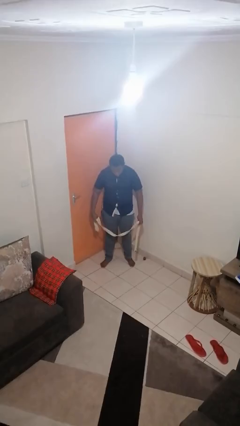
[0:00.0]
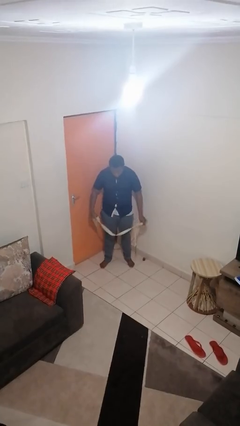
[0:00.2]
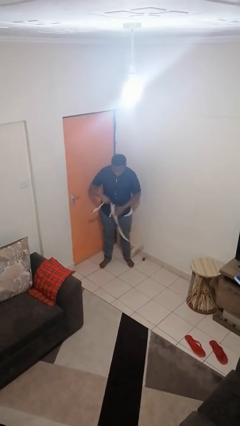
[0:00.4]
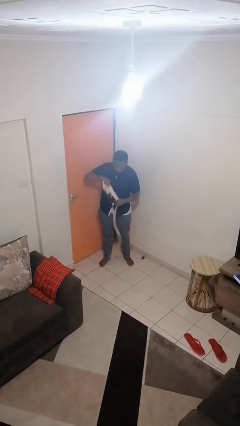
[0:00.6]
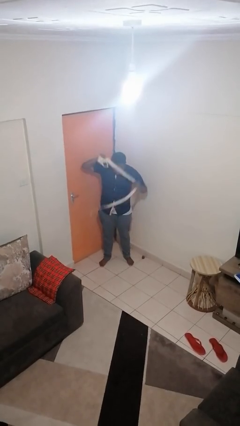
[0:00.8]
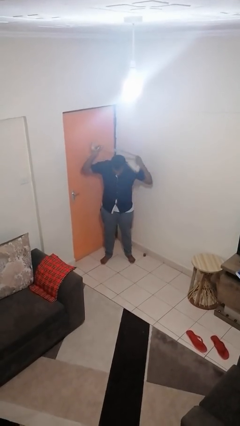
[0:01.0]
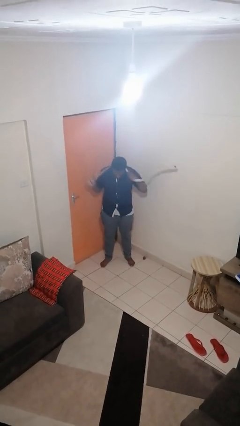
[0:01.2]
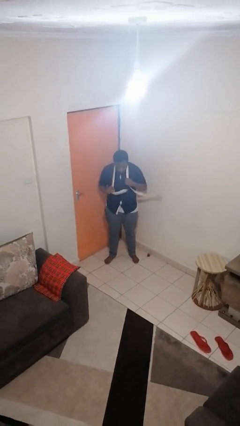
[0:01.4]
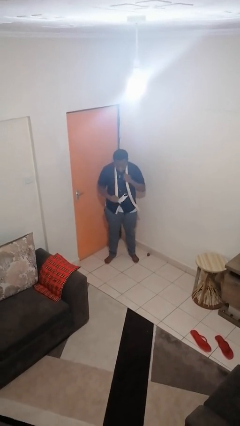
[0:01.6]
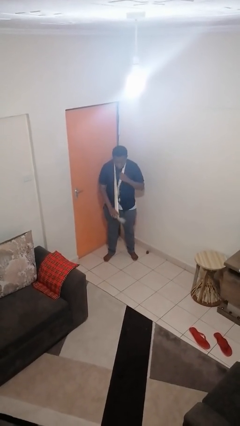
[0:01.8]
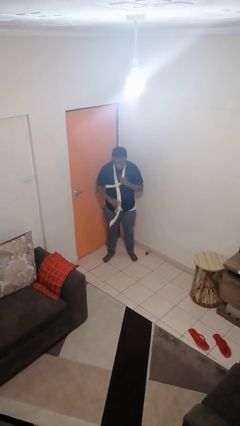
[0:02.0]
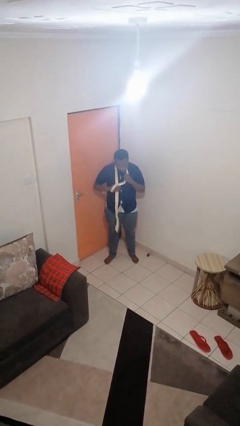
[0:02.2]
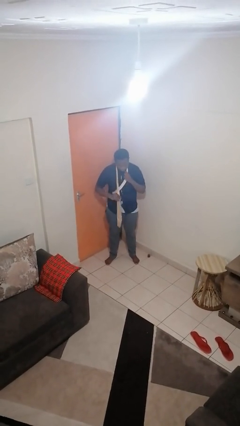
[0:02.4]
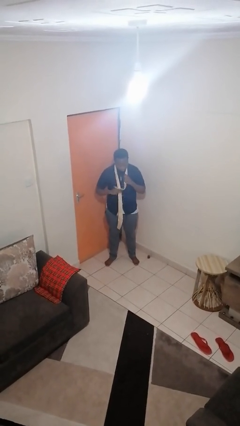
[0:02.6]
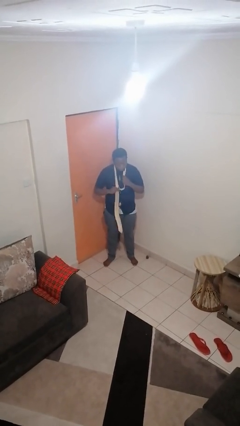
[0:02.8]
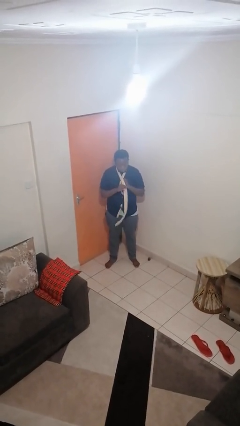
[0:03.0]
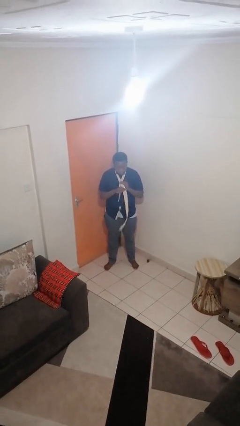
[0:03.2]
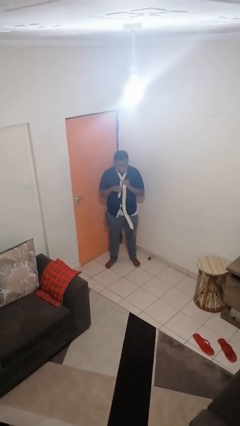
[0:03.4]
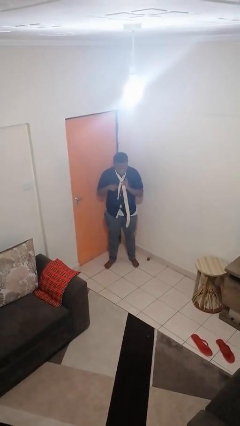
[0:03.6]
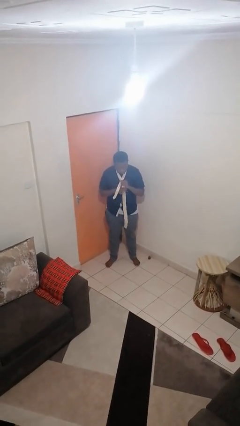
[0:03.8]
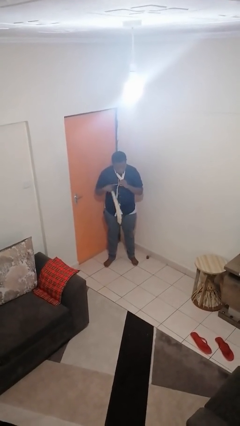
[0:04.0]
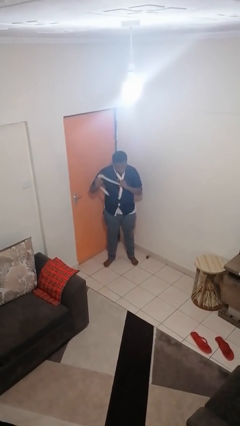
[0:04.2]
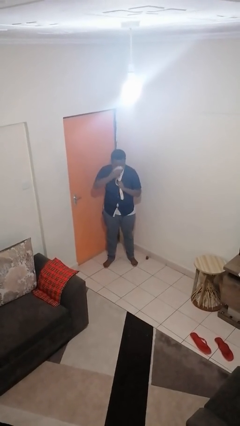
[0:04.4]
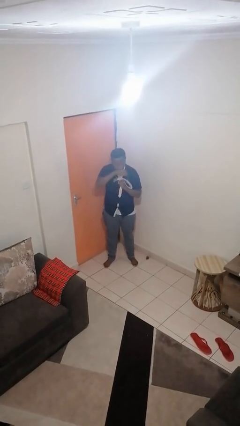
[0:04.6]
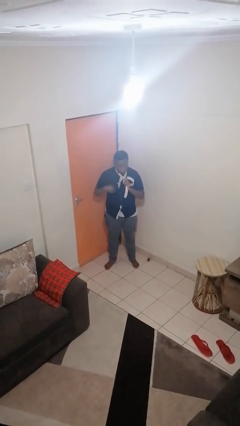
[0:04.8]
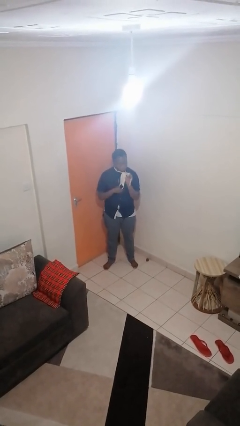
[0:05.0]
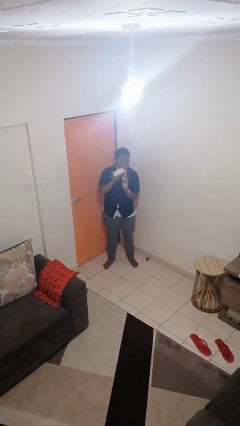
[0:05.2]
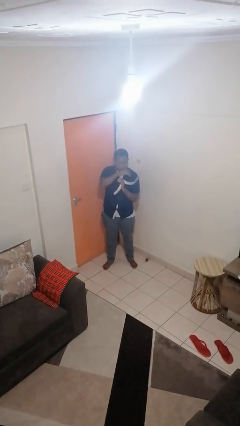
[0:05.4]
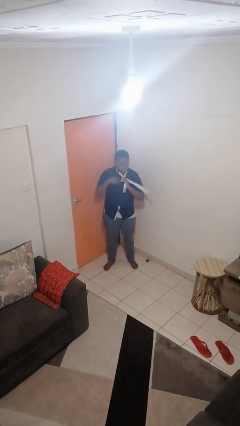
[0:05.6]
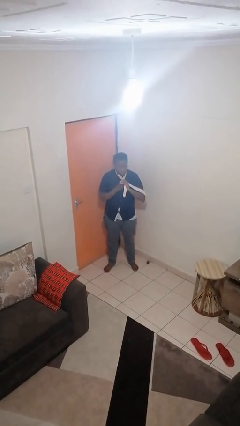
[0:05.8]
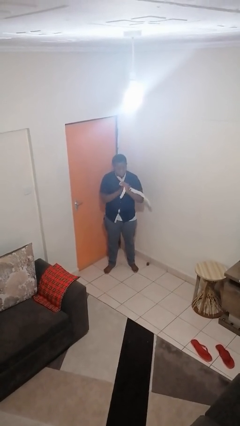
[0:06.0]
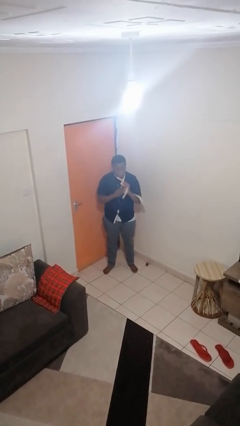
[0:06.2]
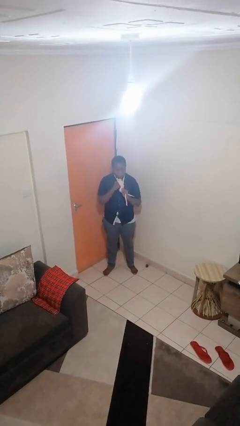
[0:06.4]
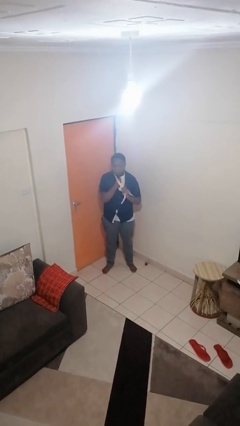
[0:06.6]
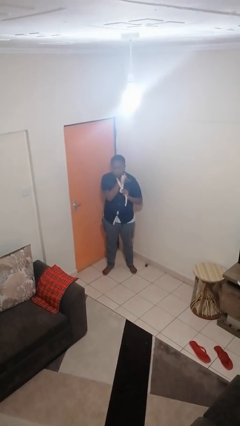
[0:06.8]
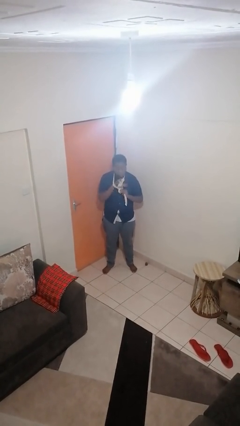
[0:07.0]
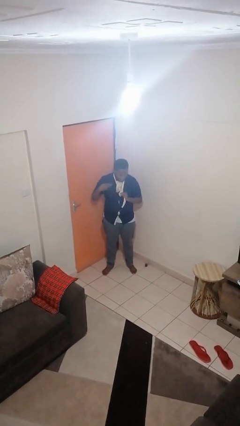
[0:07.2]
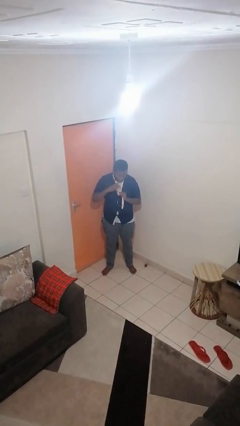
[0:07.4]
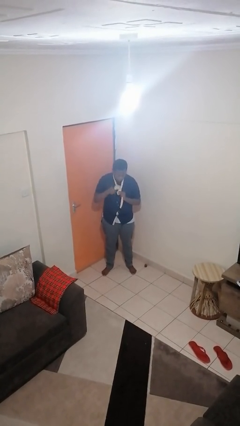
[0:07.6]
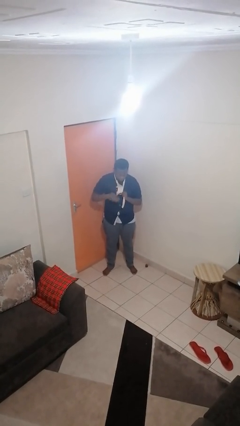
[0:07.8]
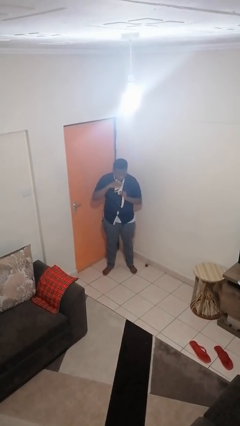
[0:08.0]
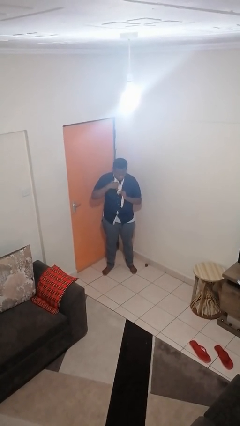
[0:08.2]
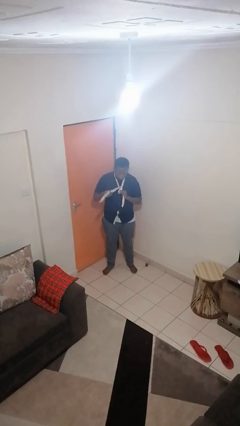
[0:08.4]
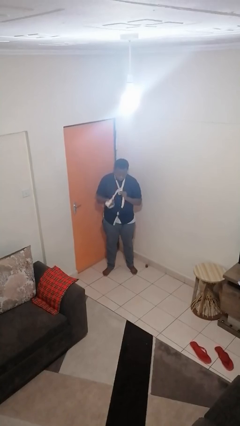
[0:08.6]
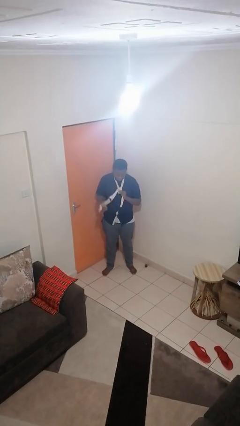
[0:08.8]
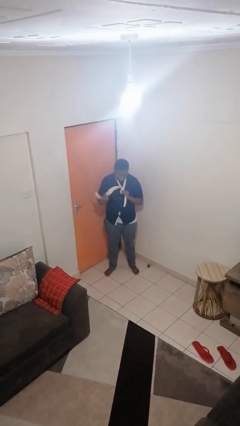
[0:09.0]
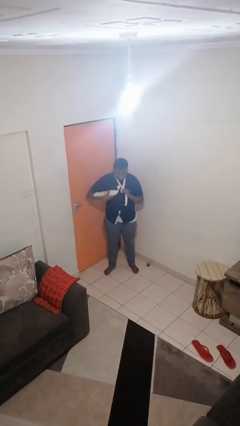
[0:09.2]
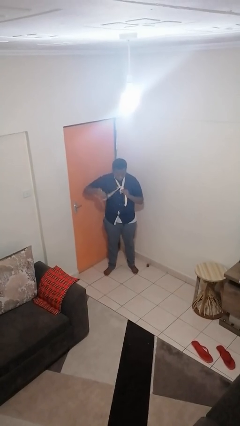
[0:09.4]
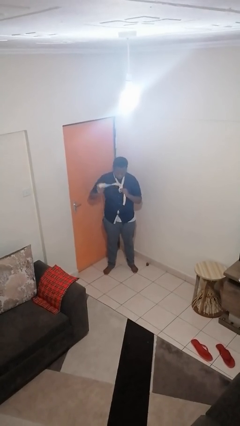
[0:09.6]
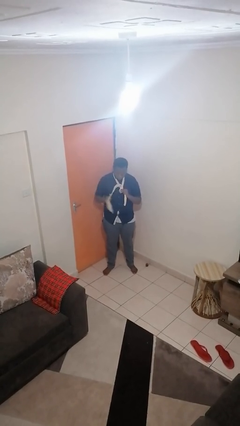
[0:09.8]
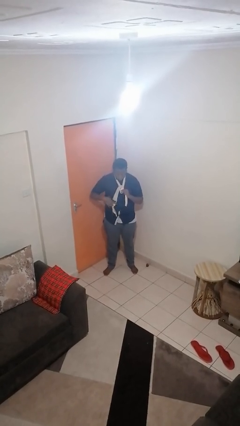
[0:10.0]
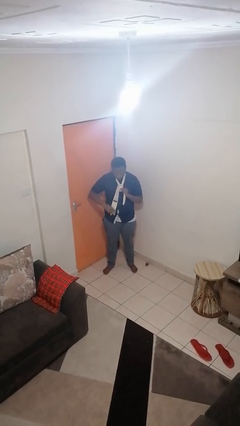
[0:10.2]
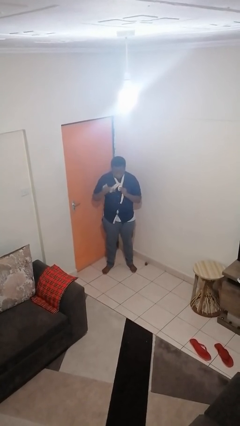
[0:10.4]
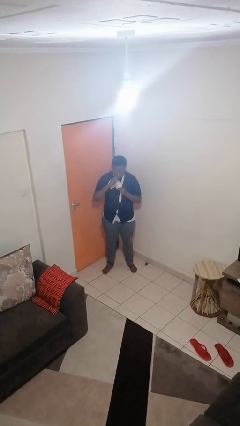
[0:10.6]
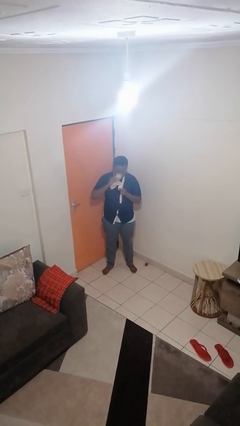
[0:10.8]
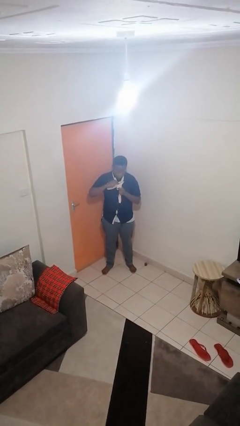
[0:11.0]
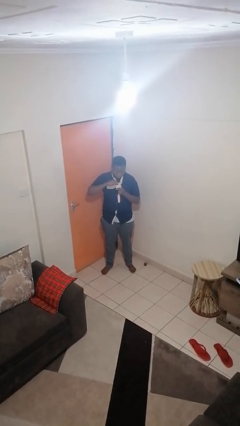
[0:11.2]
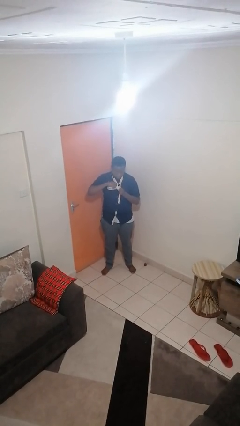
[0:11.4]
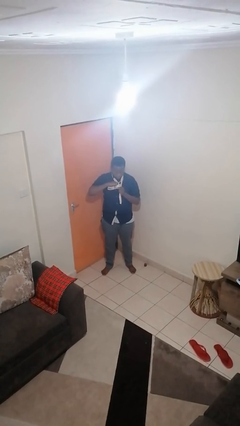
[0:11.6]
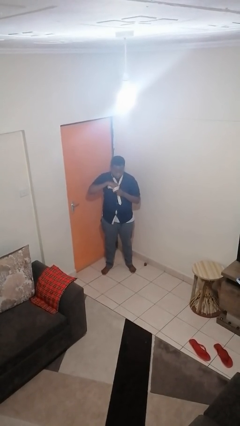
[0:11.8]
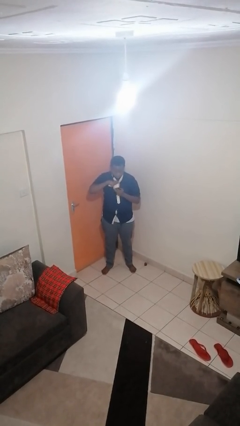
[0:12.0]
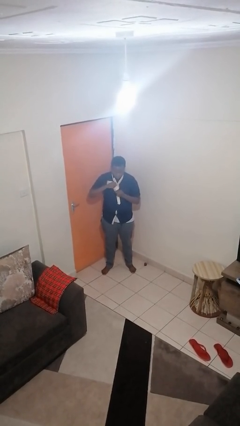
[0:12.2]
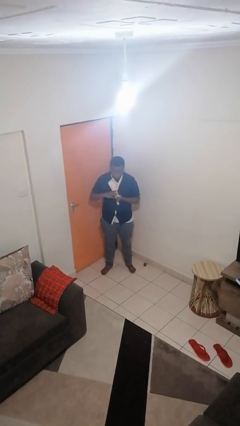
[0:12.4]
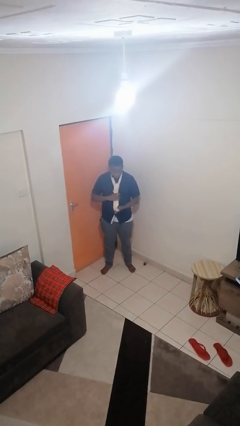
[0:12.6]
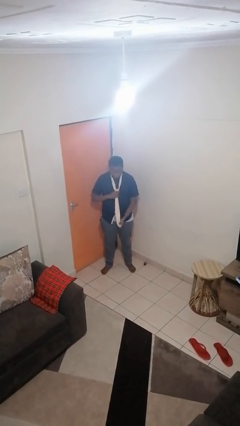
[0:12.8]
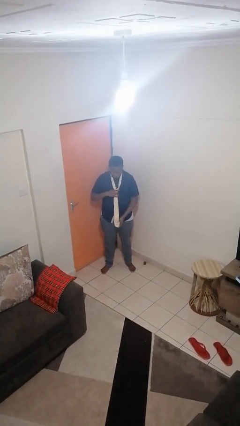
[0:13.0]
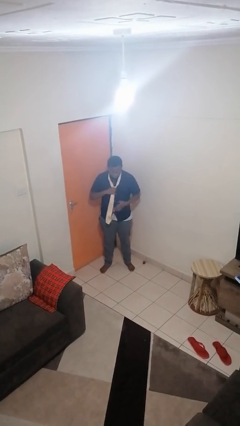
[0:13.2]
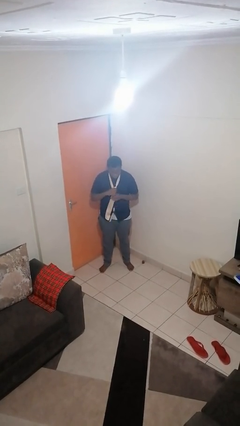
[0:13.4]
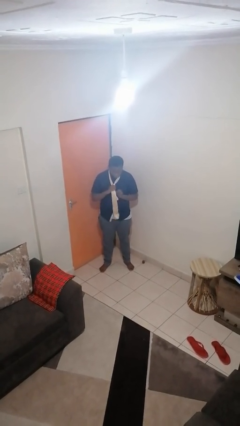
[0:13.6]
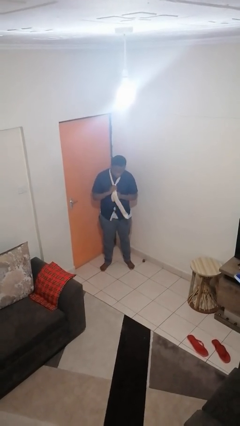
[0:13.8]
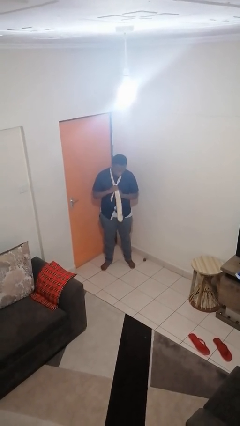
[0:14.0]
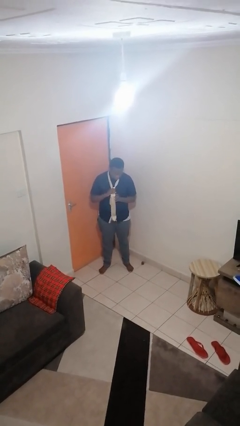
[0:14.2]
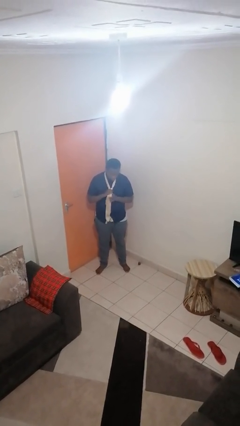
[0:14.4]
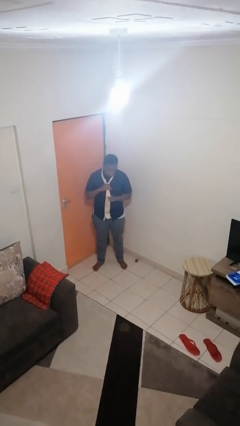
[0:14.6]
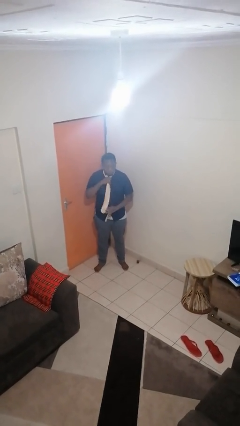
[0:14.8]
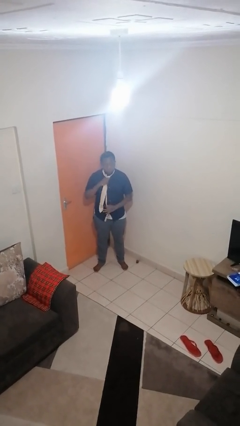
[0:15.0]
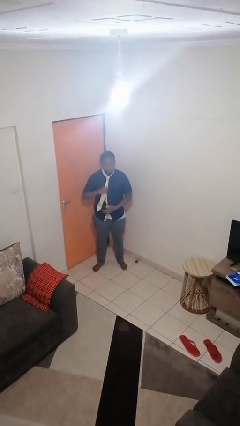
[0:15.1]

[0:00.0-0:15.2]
person puts on necktie

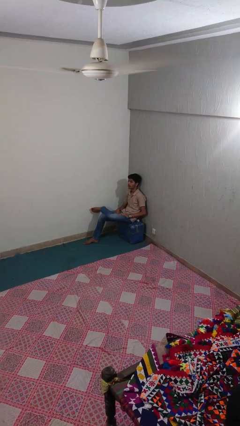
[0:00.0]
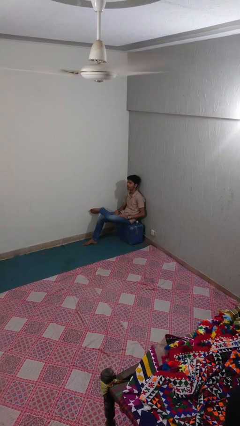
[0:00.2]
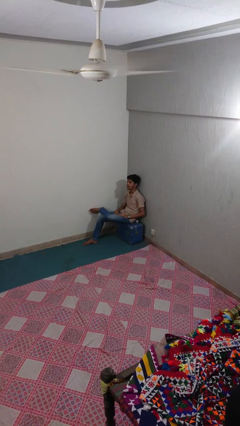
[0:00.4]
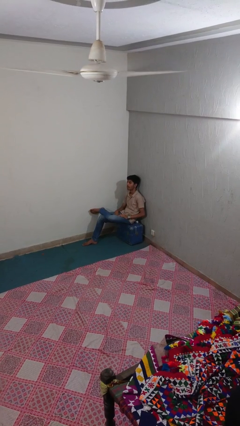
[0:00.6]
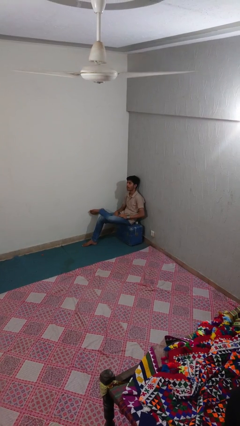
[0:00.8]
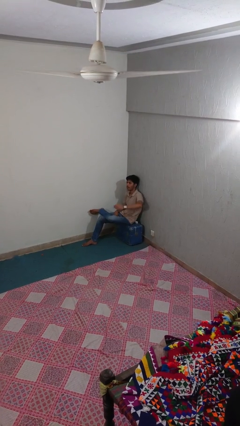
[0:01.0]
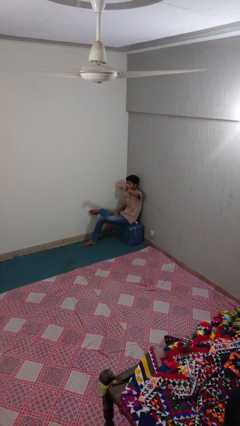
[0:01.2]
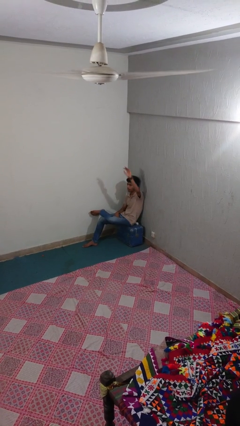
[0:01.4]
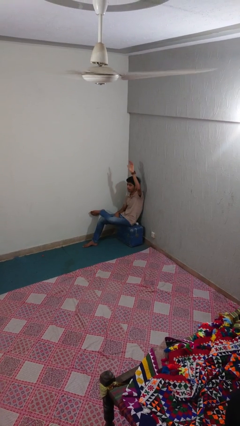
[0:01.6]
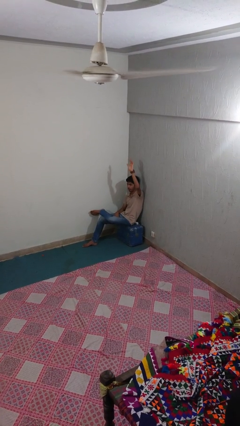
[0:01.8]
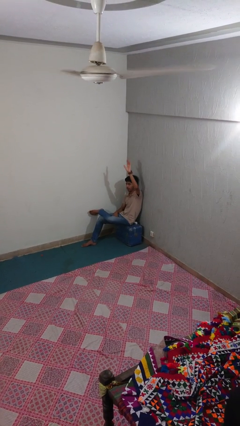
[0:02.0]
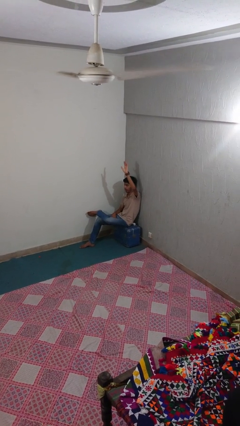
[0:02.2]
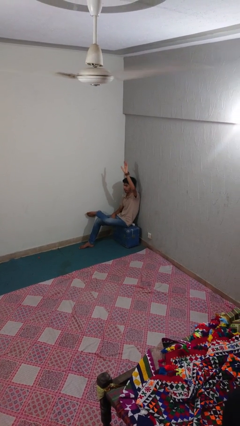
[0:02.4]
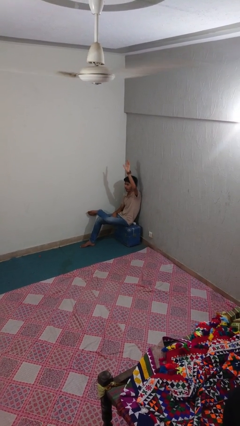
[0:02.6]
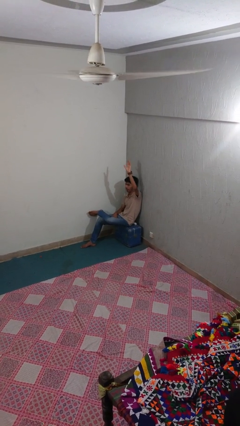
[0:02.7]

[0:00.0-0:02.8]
person gestures raise hand
